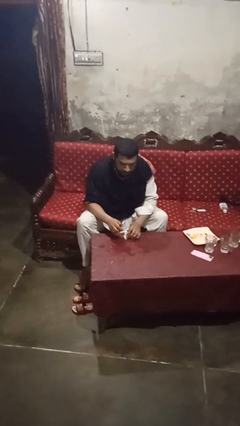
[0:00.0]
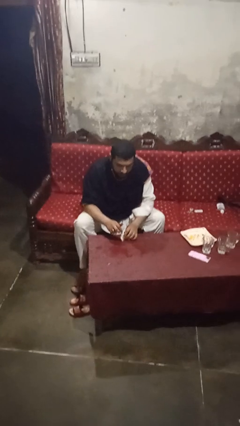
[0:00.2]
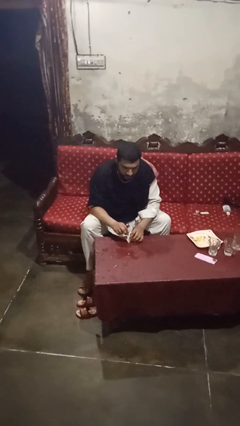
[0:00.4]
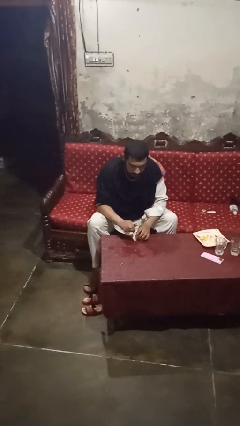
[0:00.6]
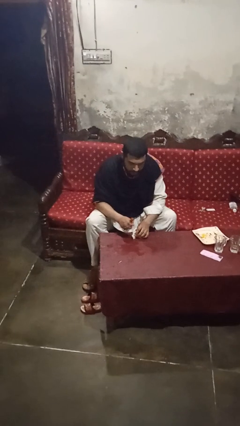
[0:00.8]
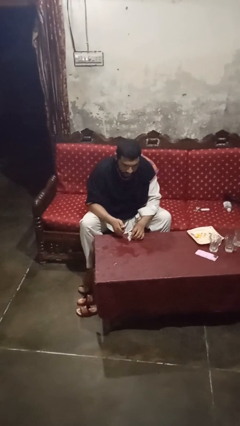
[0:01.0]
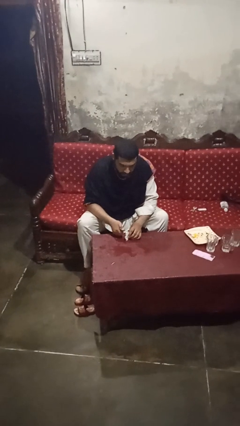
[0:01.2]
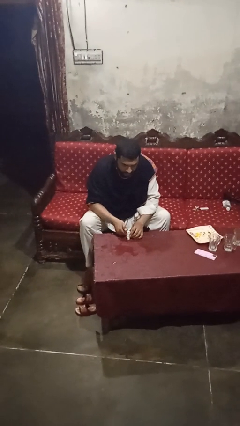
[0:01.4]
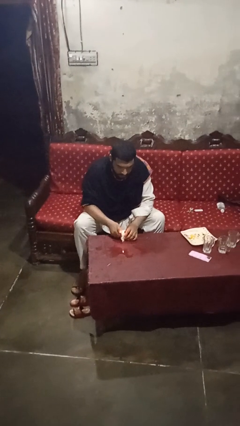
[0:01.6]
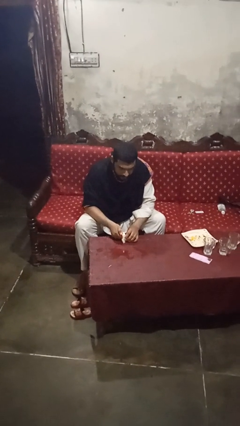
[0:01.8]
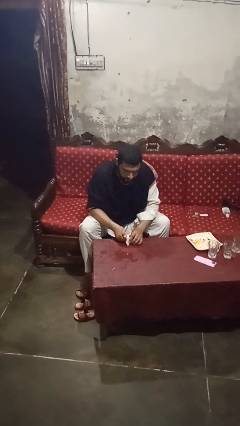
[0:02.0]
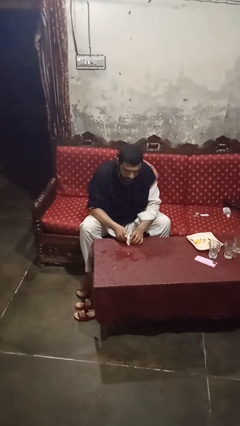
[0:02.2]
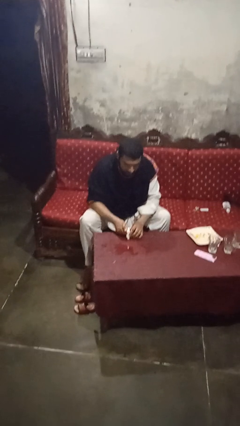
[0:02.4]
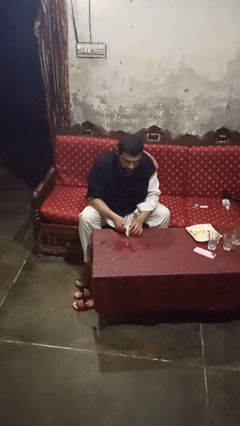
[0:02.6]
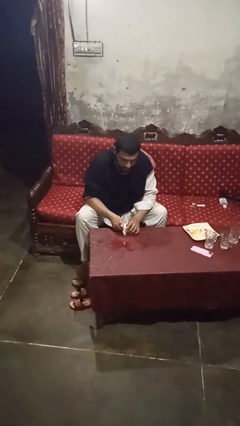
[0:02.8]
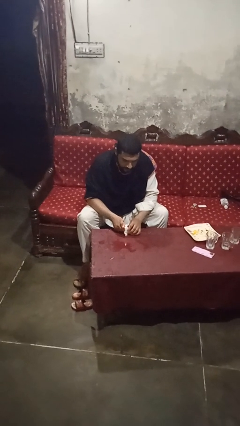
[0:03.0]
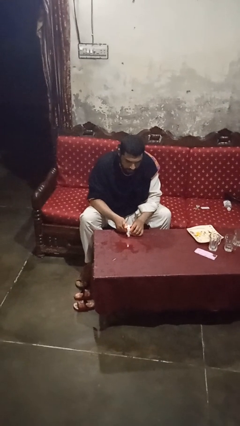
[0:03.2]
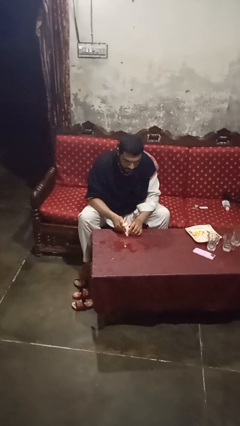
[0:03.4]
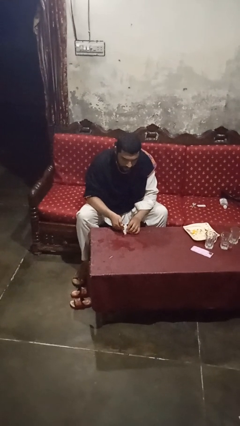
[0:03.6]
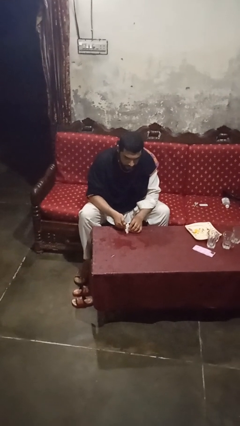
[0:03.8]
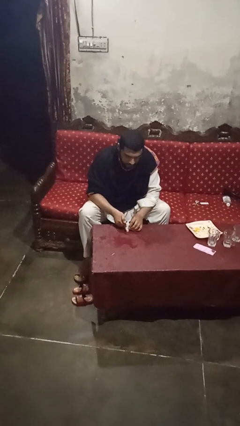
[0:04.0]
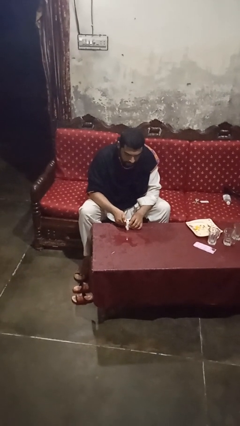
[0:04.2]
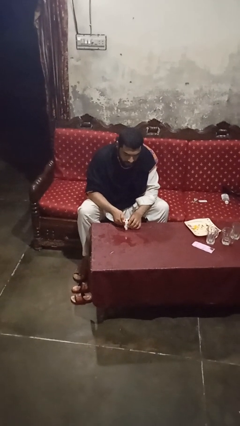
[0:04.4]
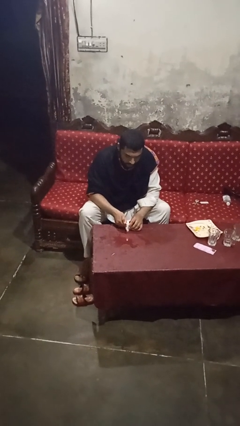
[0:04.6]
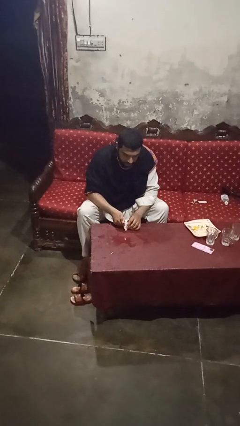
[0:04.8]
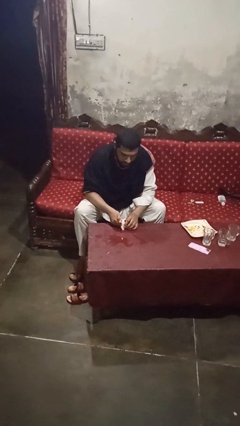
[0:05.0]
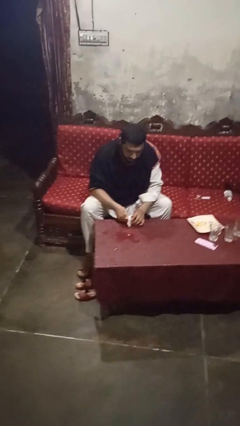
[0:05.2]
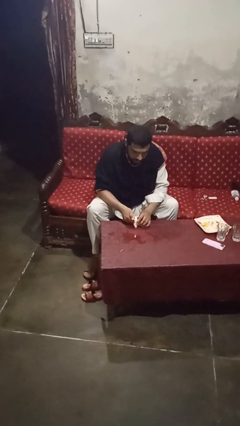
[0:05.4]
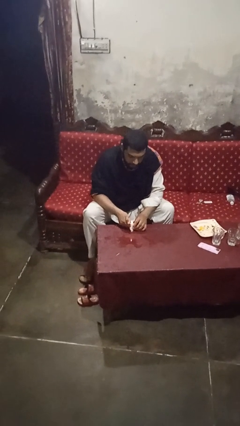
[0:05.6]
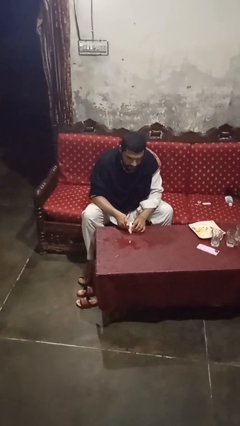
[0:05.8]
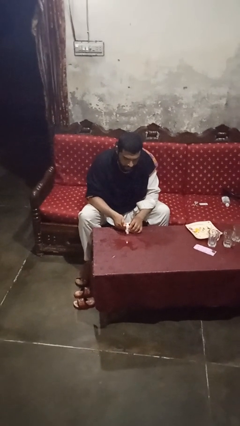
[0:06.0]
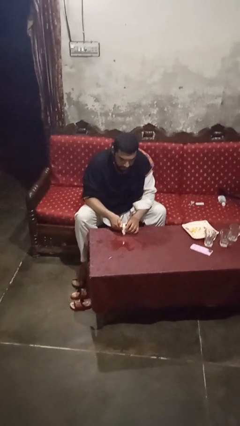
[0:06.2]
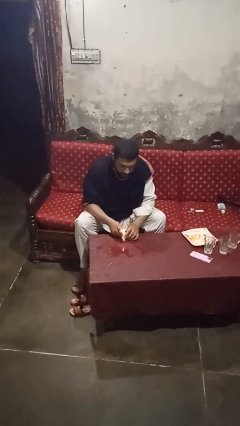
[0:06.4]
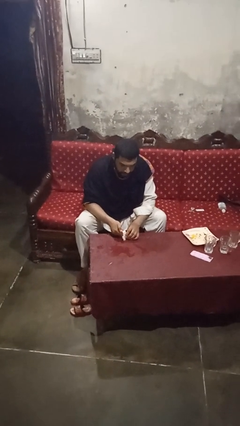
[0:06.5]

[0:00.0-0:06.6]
person lights candle

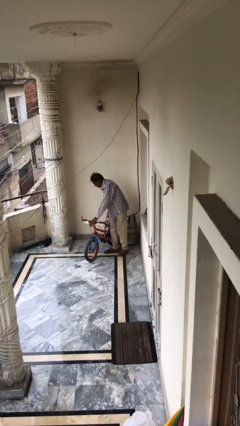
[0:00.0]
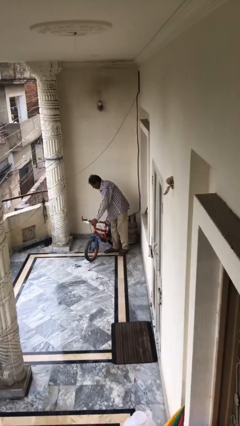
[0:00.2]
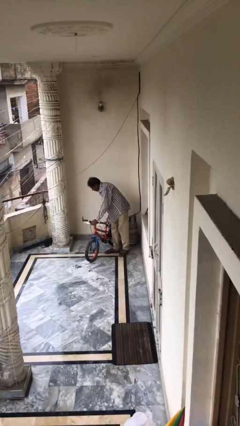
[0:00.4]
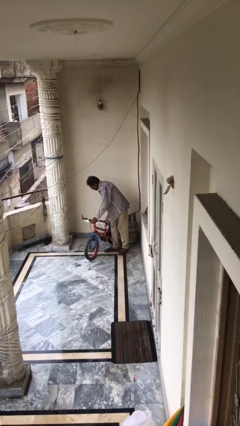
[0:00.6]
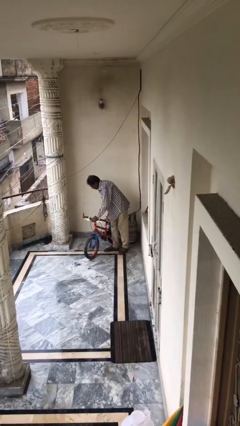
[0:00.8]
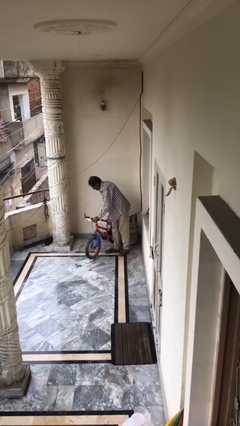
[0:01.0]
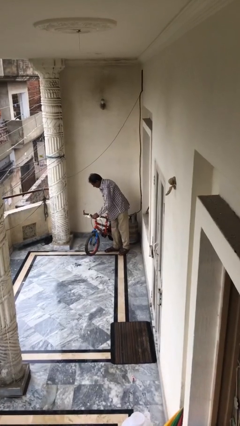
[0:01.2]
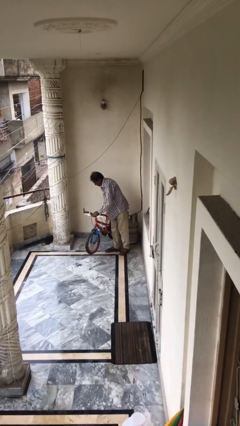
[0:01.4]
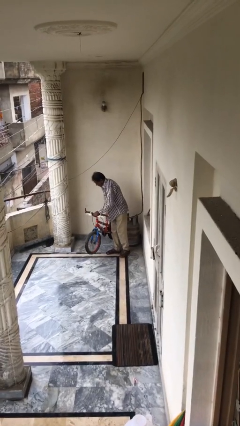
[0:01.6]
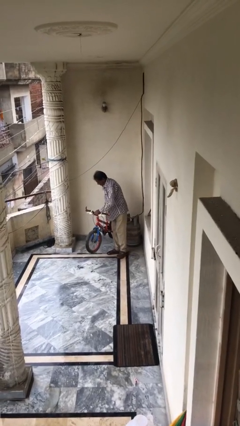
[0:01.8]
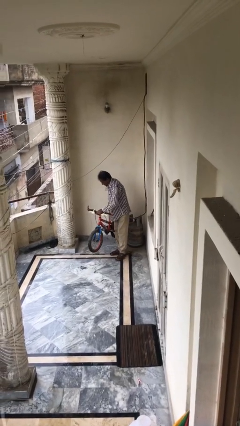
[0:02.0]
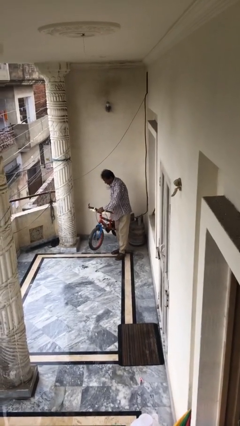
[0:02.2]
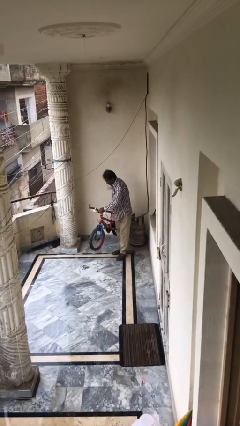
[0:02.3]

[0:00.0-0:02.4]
person picks up object from floor

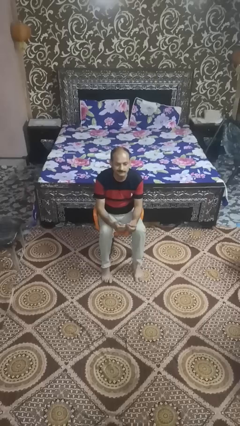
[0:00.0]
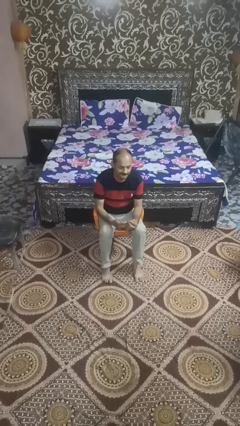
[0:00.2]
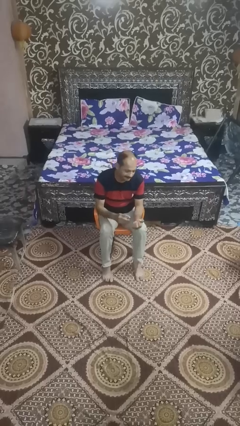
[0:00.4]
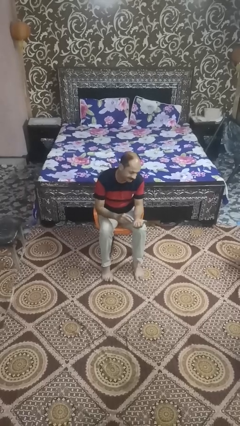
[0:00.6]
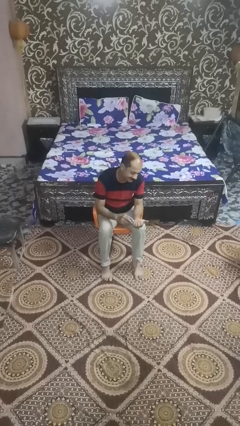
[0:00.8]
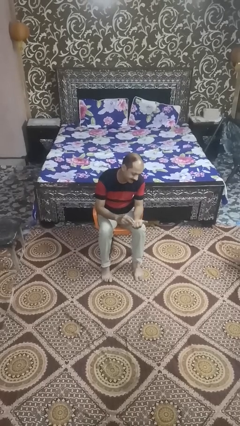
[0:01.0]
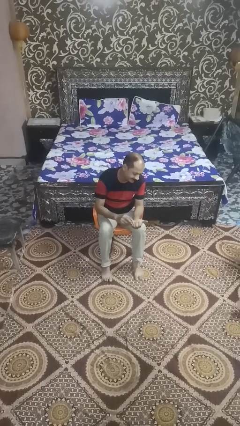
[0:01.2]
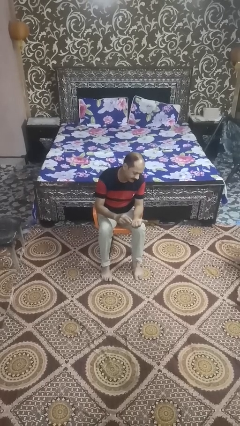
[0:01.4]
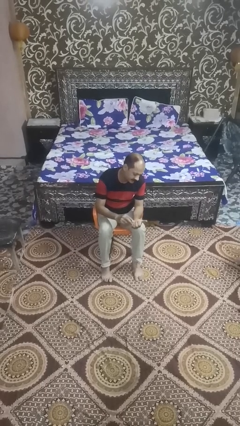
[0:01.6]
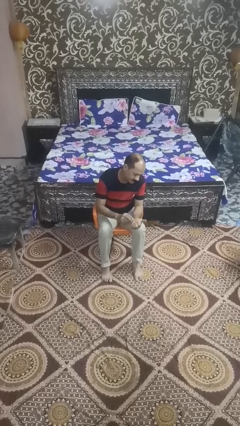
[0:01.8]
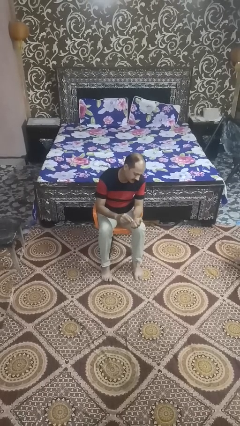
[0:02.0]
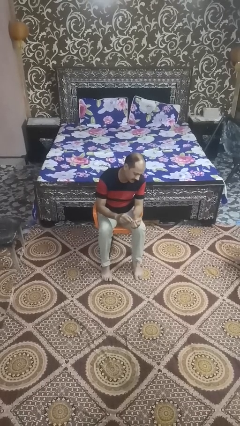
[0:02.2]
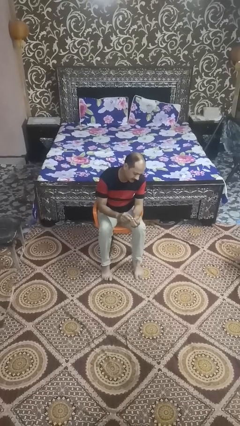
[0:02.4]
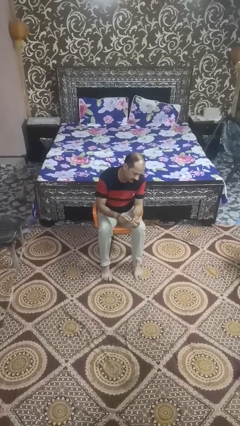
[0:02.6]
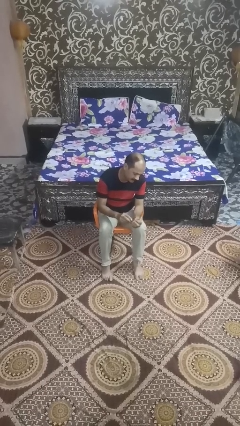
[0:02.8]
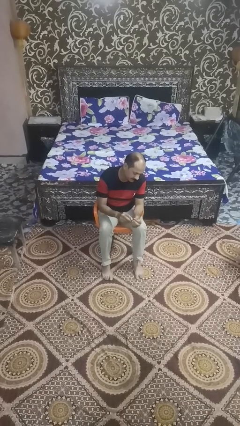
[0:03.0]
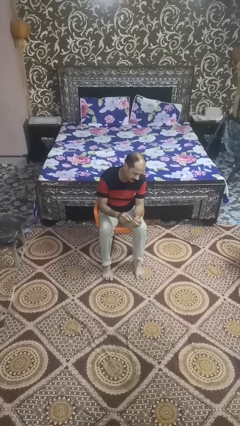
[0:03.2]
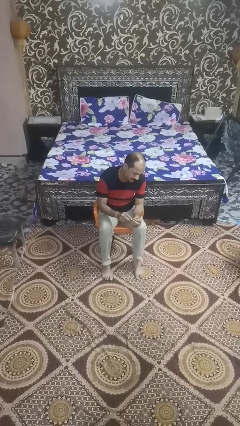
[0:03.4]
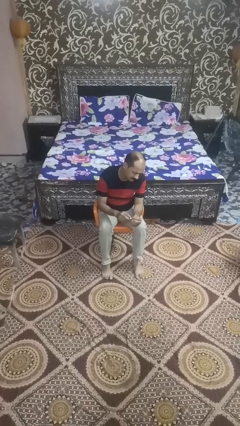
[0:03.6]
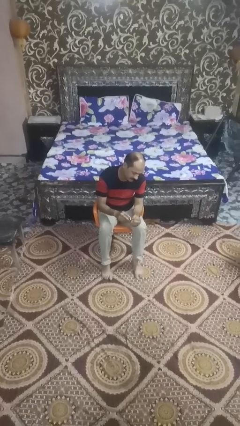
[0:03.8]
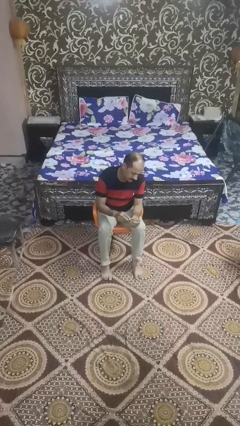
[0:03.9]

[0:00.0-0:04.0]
person files fingernails

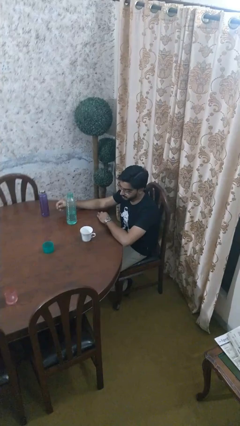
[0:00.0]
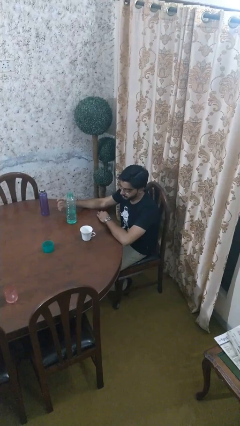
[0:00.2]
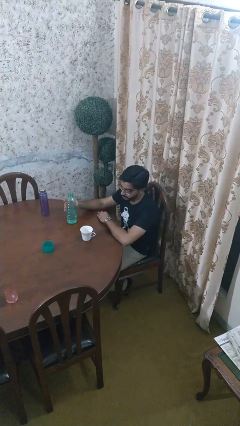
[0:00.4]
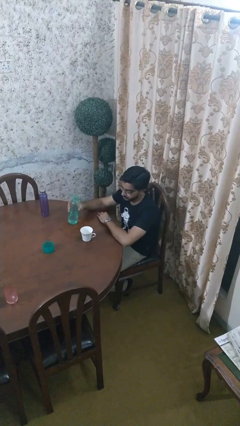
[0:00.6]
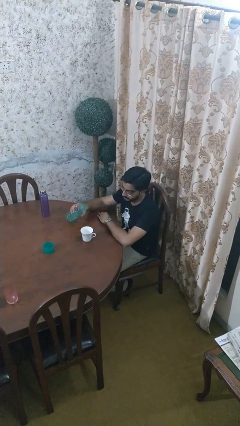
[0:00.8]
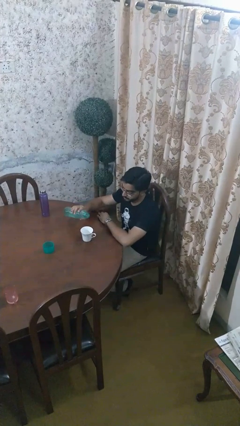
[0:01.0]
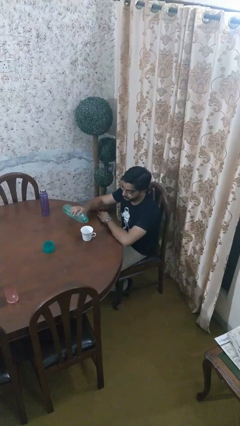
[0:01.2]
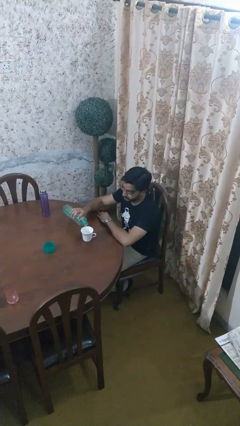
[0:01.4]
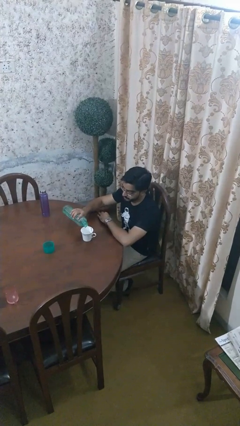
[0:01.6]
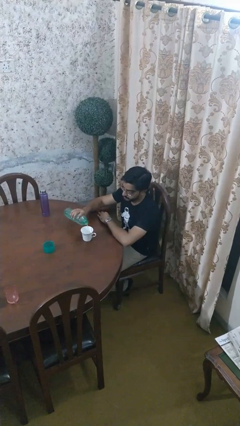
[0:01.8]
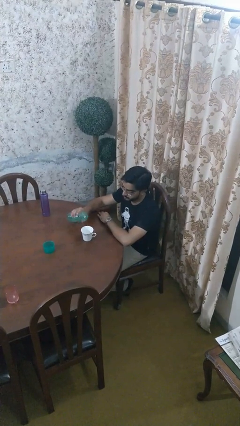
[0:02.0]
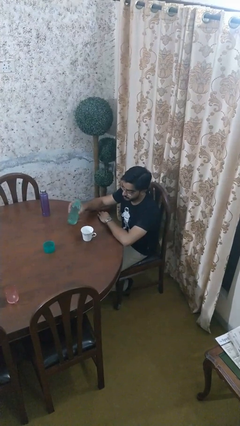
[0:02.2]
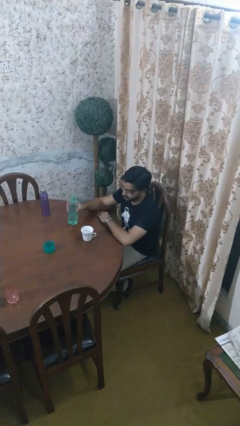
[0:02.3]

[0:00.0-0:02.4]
person pours liquid into cup

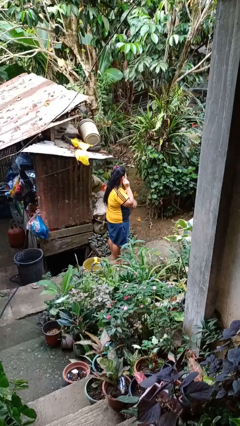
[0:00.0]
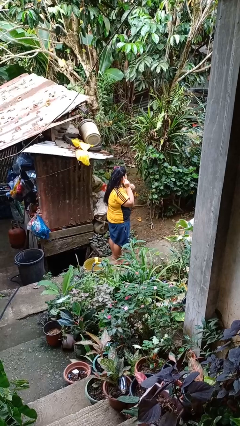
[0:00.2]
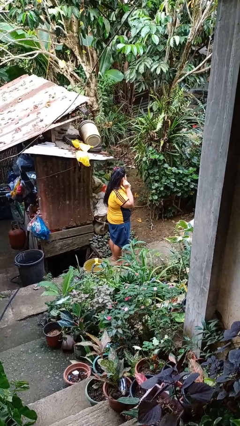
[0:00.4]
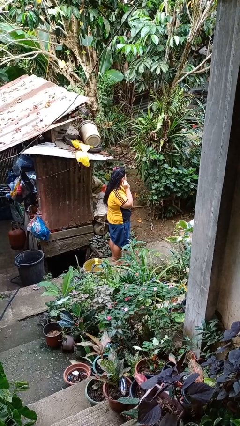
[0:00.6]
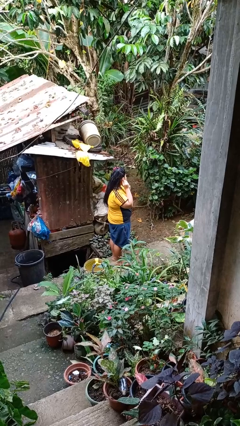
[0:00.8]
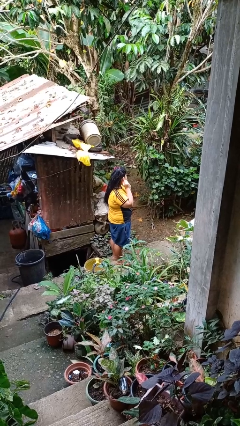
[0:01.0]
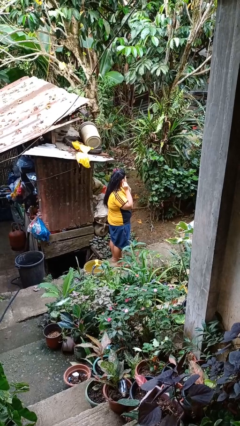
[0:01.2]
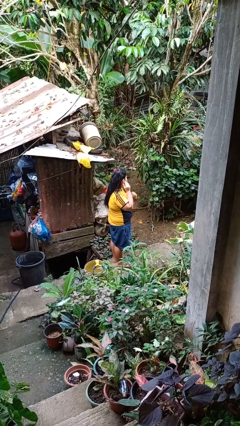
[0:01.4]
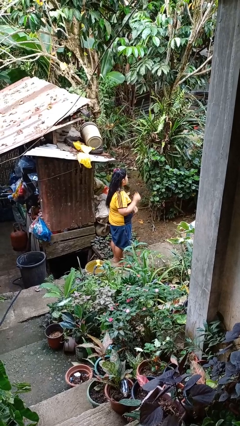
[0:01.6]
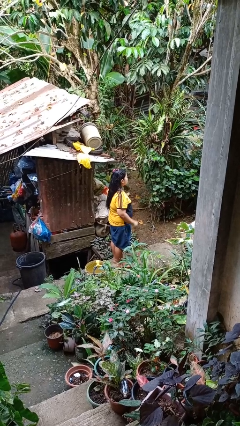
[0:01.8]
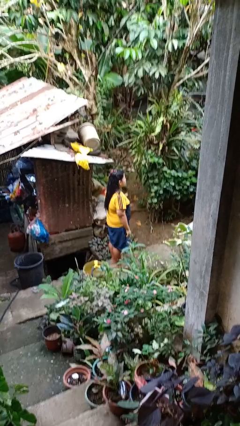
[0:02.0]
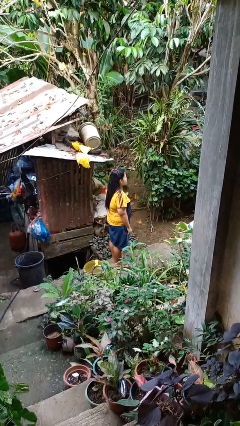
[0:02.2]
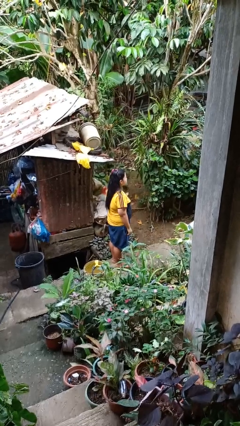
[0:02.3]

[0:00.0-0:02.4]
person puts on earrings
